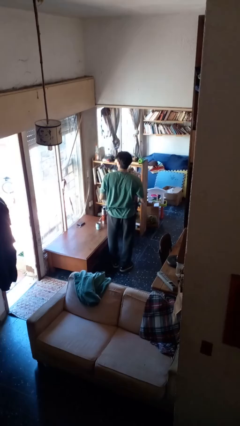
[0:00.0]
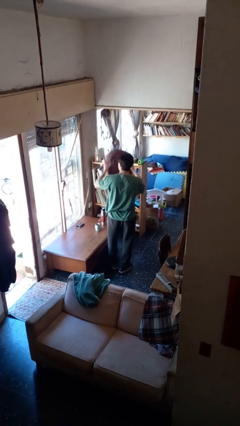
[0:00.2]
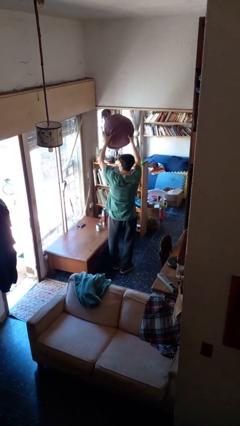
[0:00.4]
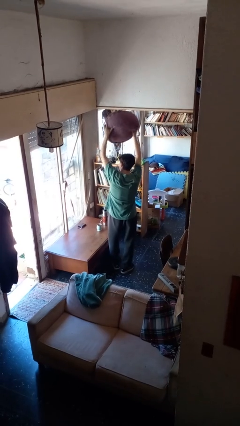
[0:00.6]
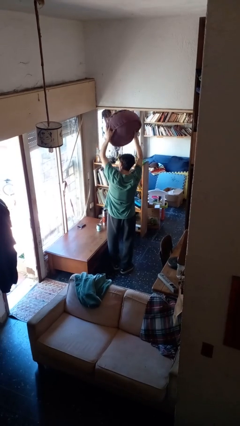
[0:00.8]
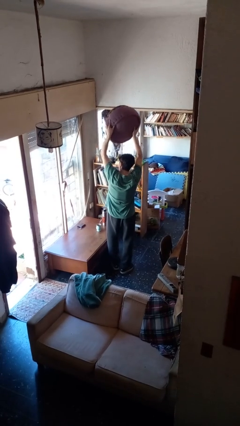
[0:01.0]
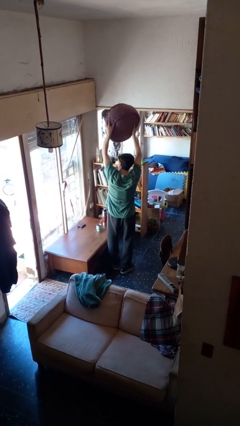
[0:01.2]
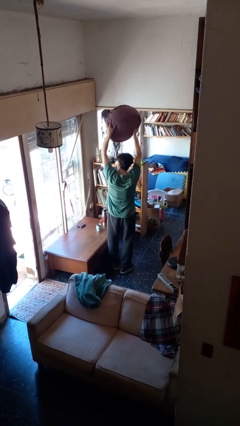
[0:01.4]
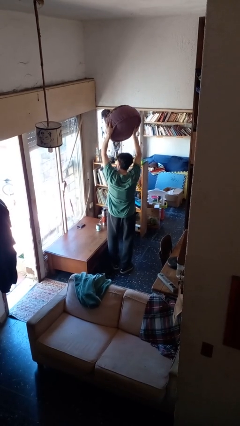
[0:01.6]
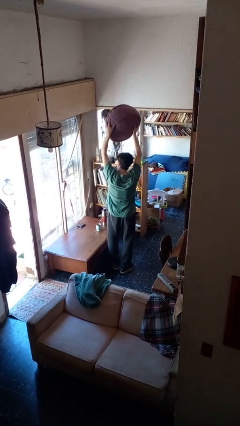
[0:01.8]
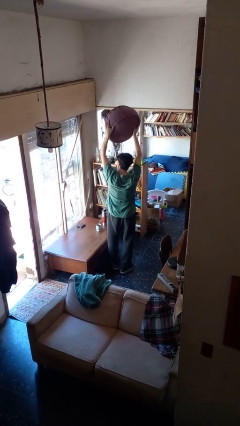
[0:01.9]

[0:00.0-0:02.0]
person holds object above head

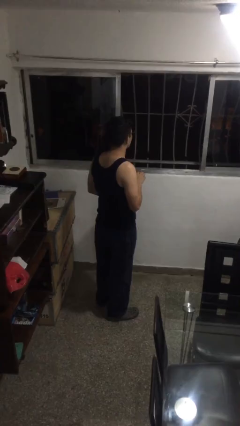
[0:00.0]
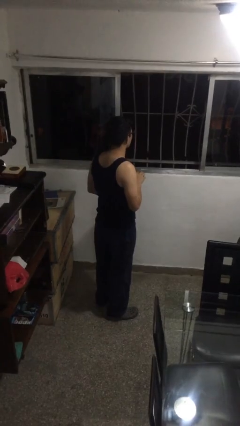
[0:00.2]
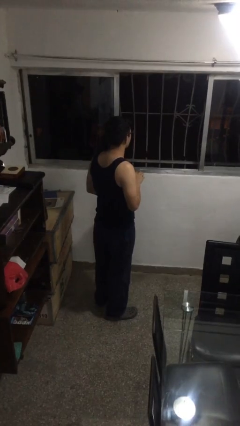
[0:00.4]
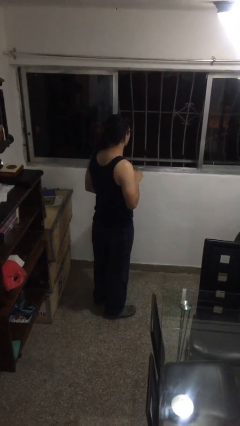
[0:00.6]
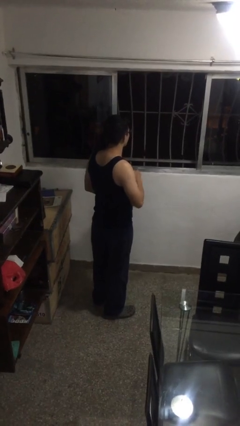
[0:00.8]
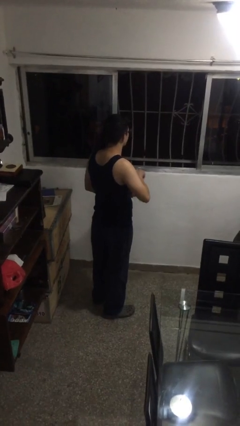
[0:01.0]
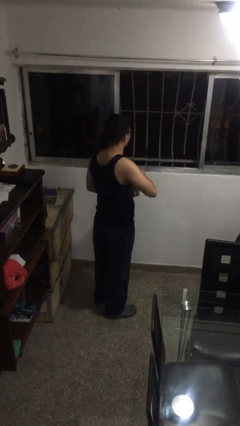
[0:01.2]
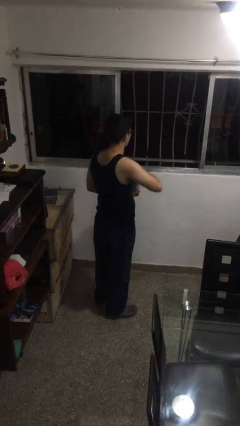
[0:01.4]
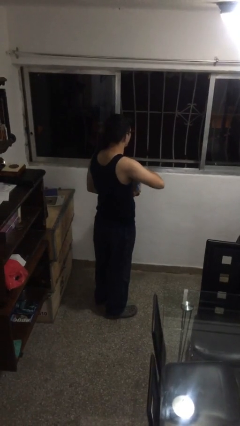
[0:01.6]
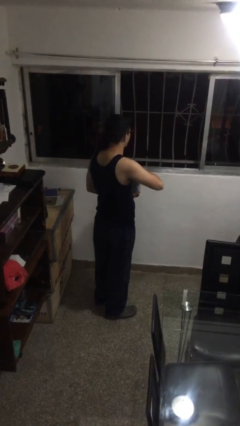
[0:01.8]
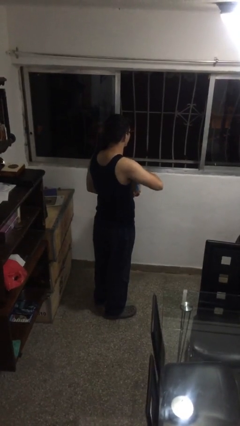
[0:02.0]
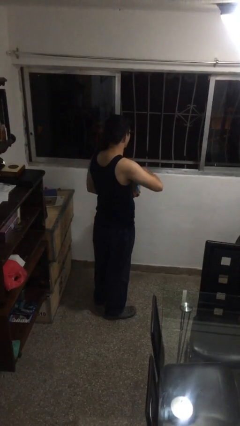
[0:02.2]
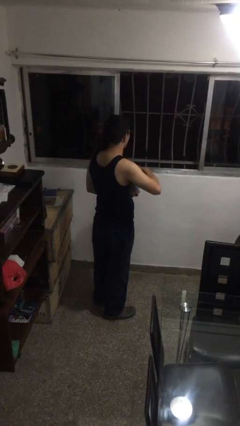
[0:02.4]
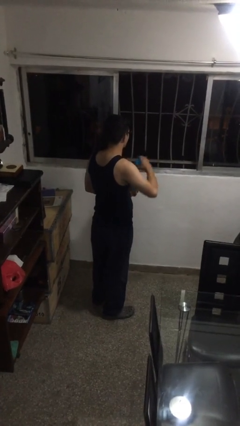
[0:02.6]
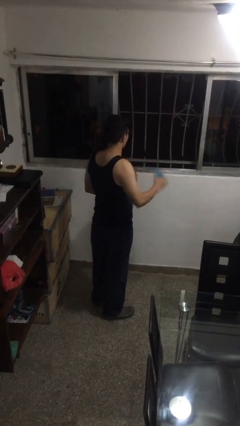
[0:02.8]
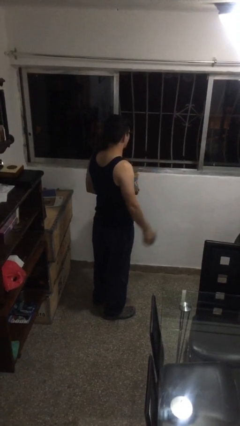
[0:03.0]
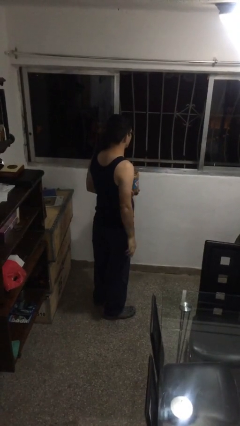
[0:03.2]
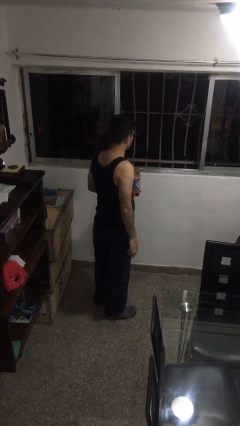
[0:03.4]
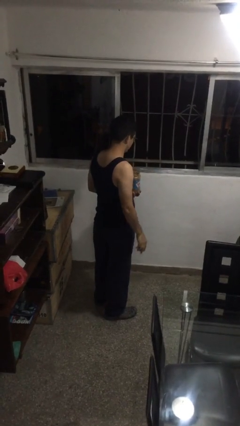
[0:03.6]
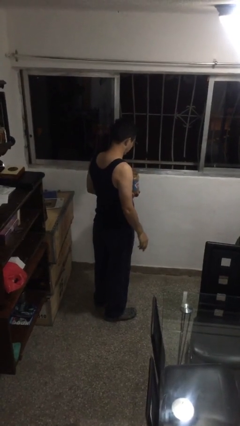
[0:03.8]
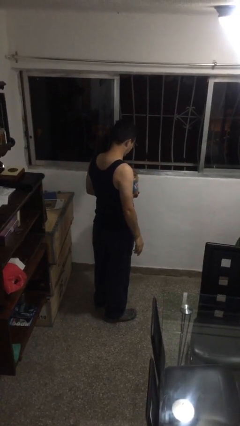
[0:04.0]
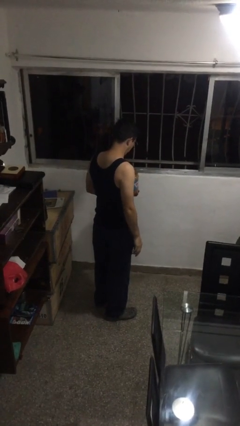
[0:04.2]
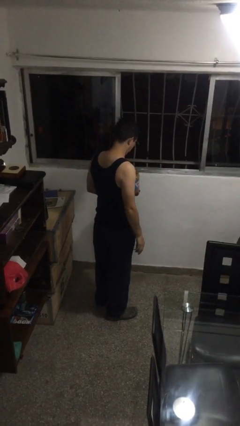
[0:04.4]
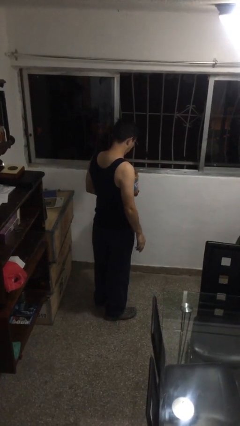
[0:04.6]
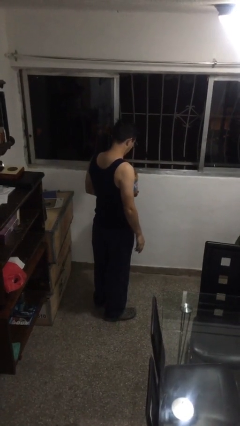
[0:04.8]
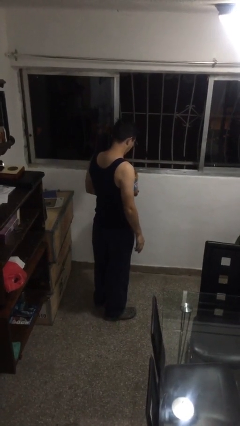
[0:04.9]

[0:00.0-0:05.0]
person opens jar

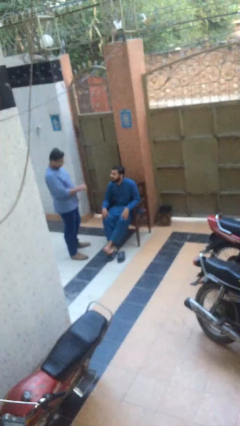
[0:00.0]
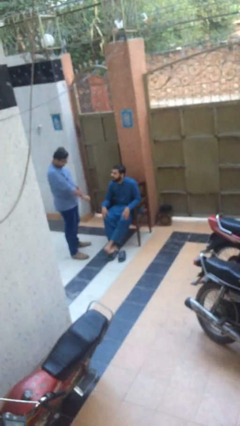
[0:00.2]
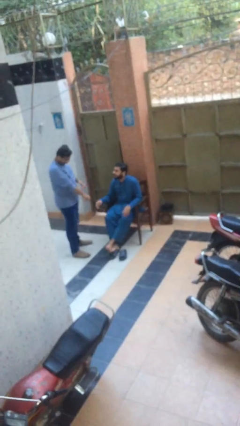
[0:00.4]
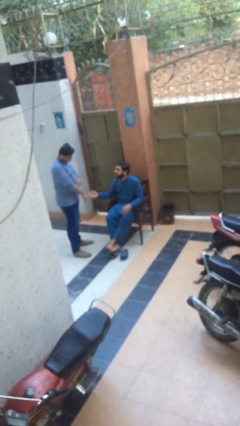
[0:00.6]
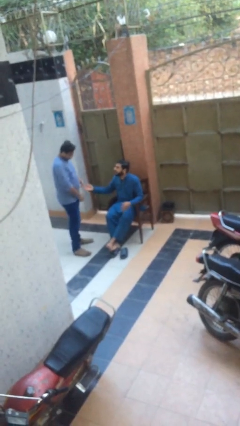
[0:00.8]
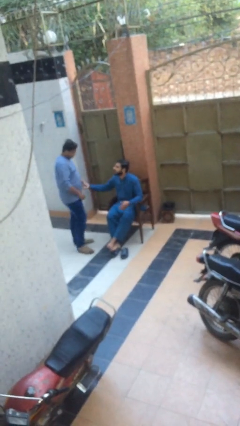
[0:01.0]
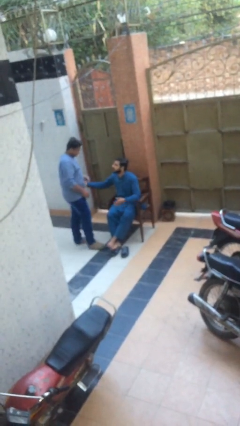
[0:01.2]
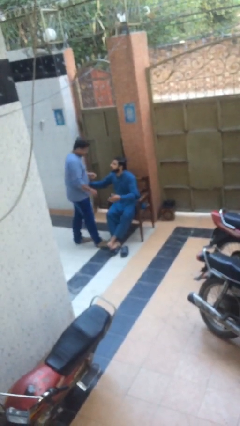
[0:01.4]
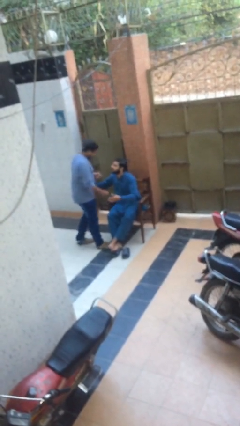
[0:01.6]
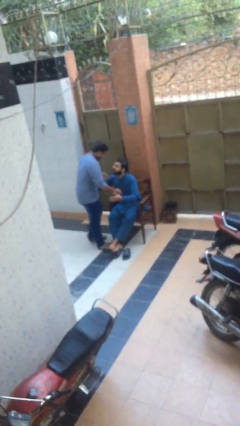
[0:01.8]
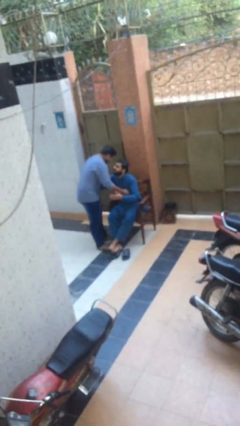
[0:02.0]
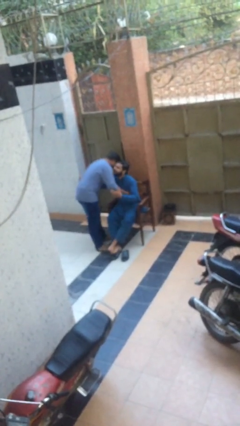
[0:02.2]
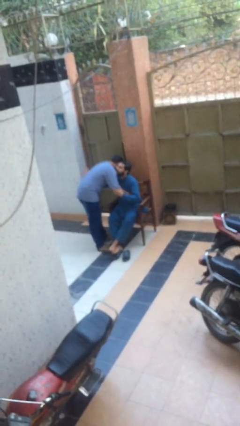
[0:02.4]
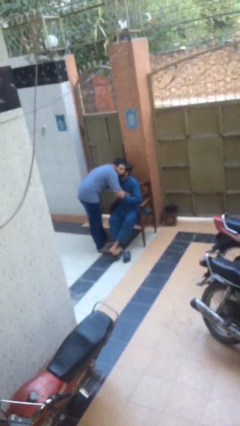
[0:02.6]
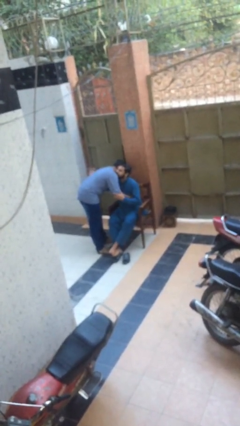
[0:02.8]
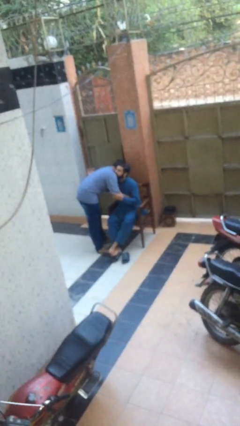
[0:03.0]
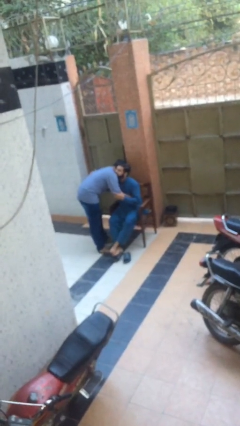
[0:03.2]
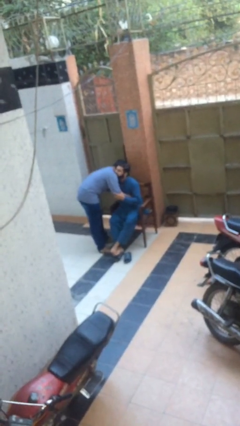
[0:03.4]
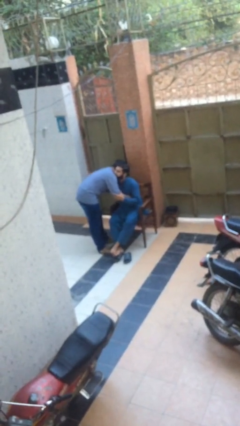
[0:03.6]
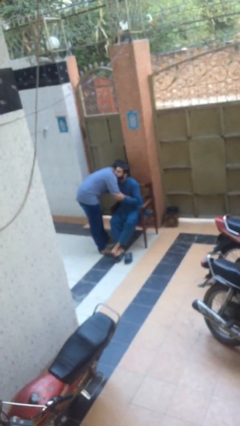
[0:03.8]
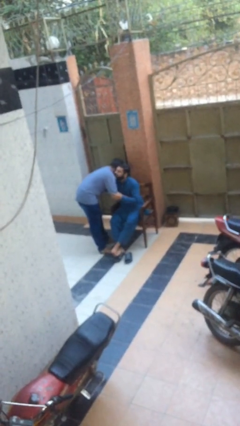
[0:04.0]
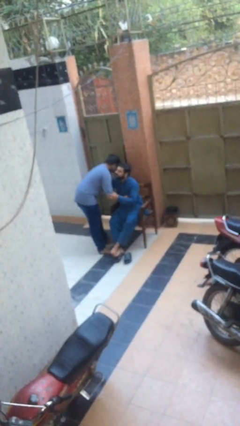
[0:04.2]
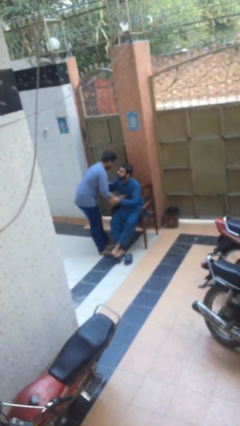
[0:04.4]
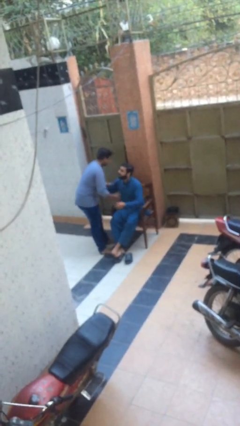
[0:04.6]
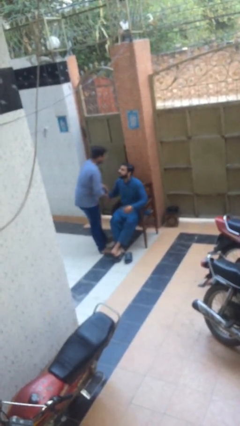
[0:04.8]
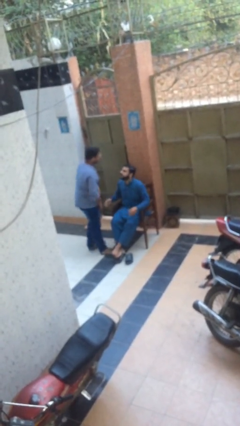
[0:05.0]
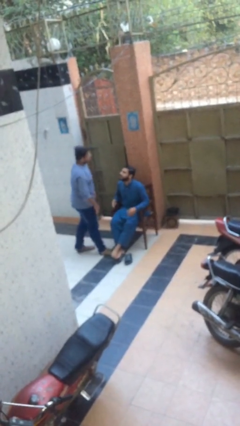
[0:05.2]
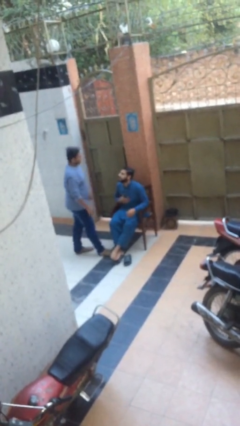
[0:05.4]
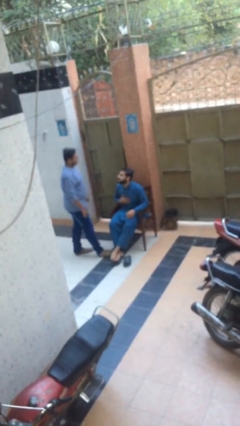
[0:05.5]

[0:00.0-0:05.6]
person embraces person

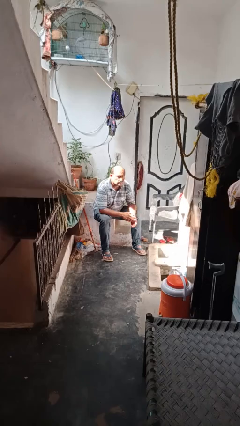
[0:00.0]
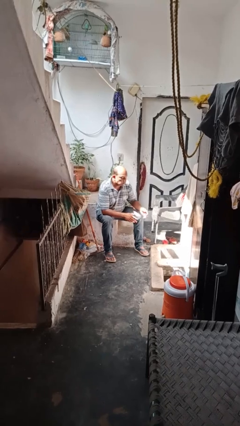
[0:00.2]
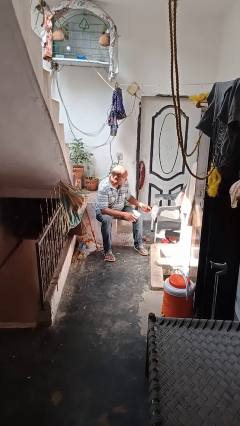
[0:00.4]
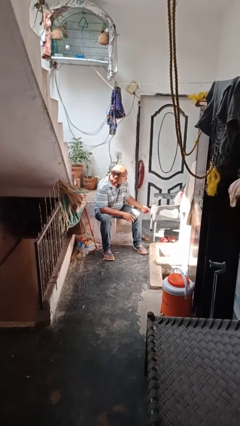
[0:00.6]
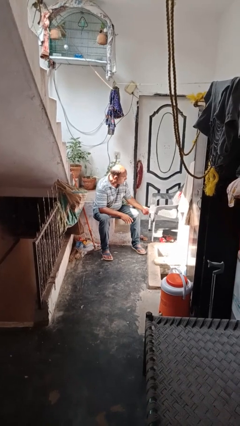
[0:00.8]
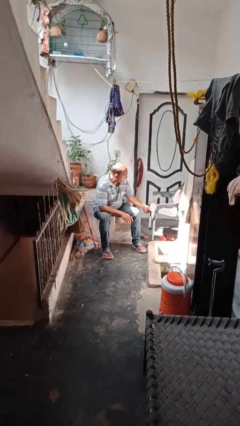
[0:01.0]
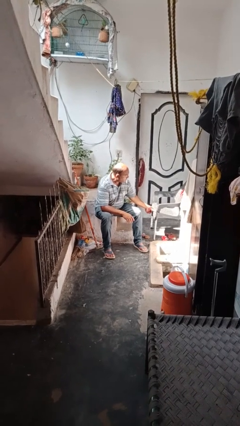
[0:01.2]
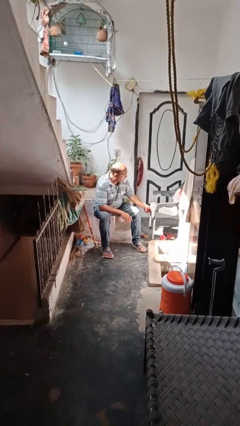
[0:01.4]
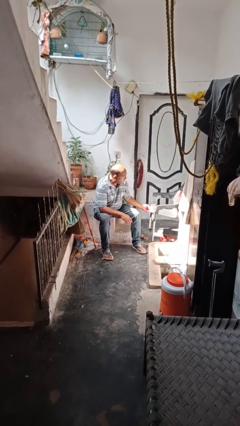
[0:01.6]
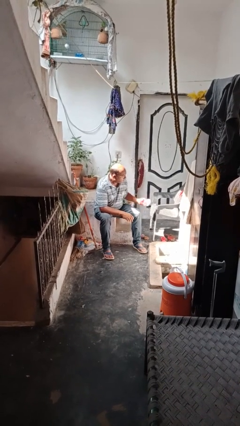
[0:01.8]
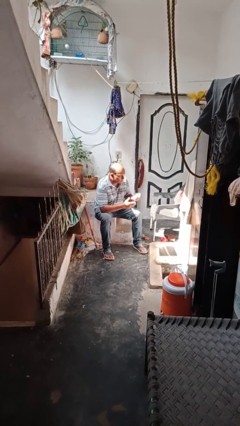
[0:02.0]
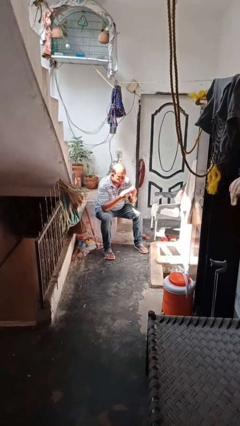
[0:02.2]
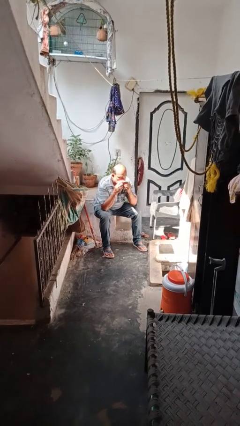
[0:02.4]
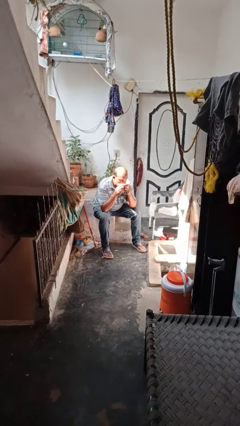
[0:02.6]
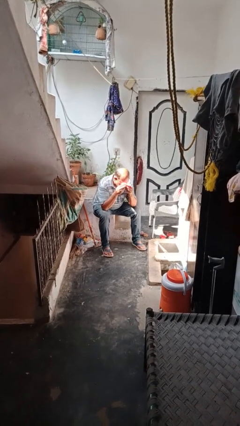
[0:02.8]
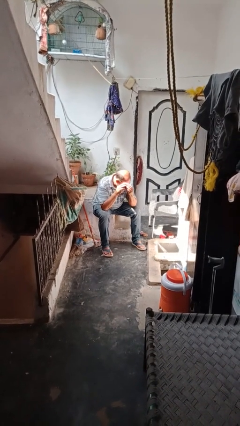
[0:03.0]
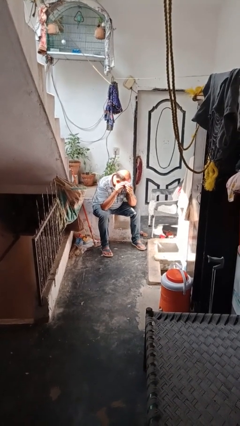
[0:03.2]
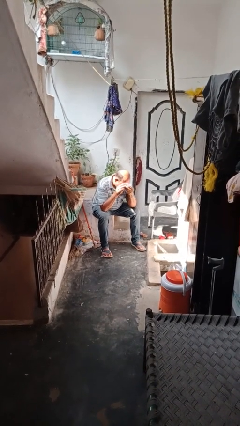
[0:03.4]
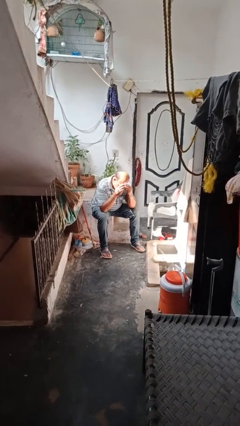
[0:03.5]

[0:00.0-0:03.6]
person wipes mouth with napkin

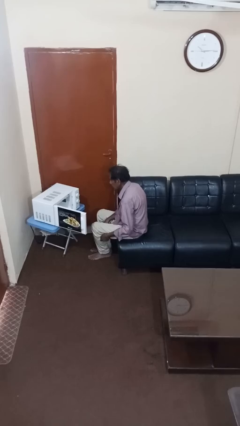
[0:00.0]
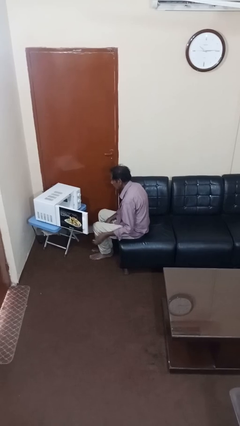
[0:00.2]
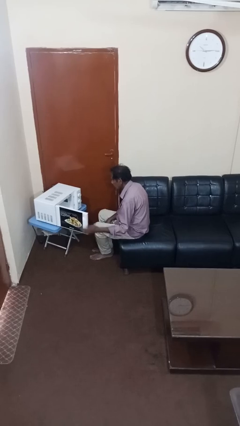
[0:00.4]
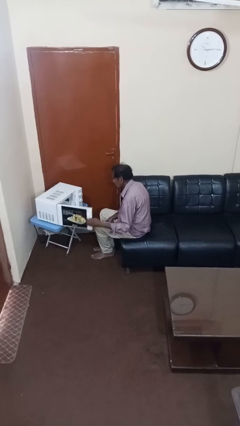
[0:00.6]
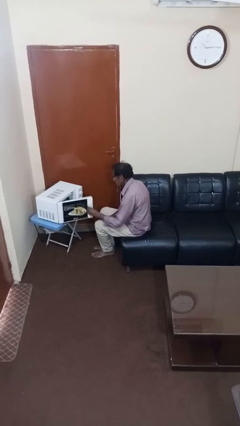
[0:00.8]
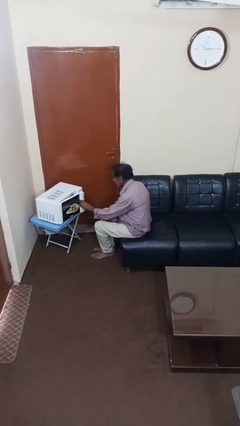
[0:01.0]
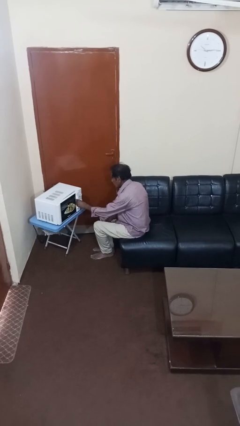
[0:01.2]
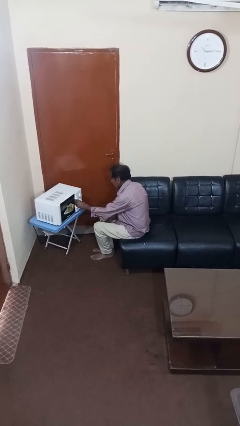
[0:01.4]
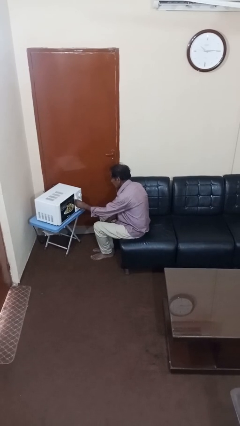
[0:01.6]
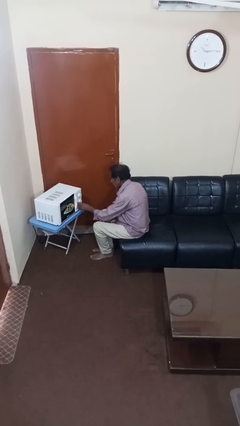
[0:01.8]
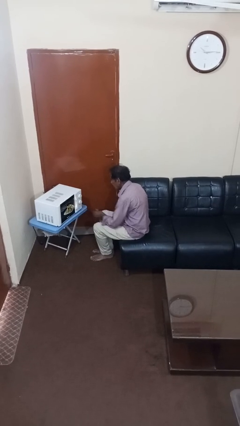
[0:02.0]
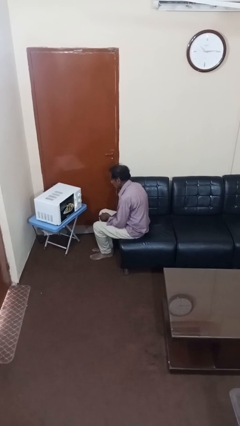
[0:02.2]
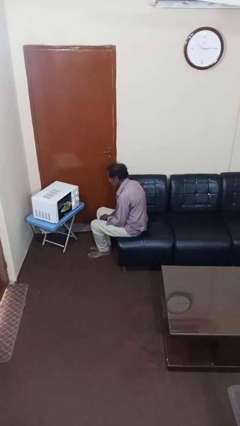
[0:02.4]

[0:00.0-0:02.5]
person closes microwave
